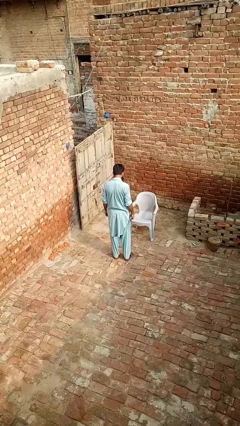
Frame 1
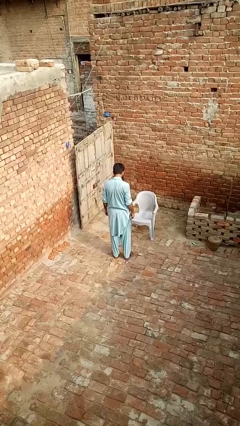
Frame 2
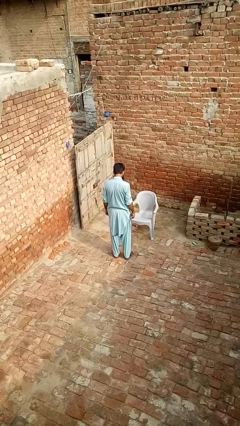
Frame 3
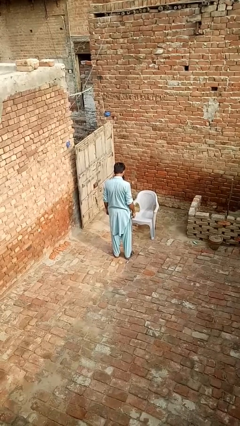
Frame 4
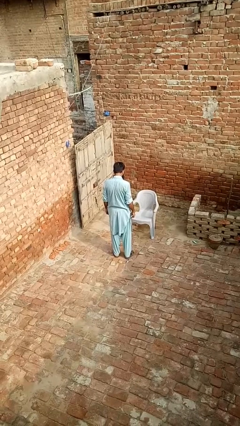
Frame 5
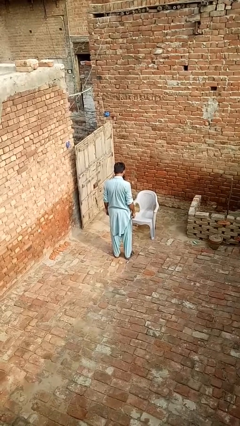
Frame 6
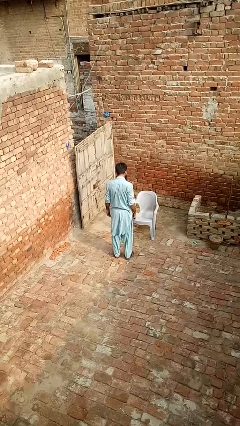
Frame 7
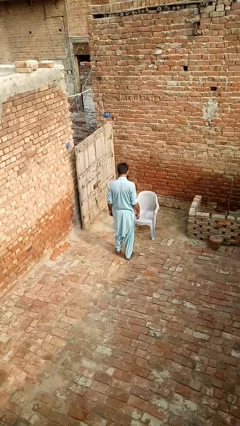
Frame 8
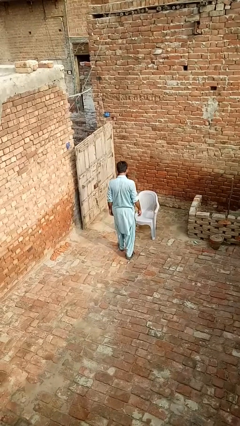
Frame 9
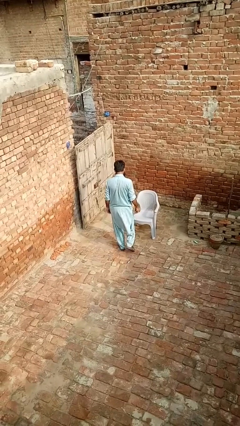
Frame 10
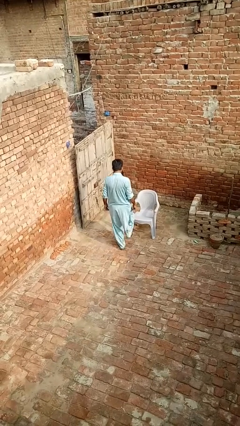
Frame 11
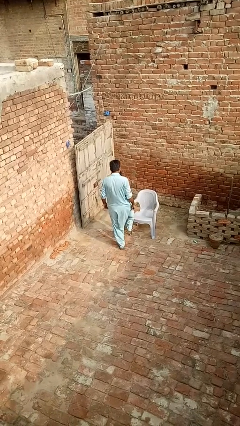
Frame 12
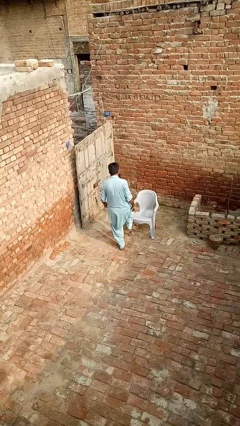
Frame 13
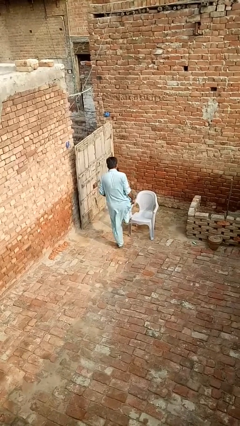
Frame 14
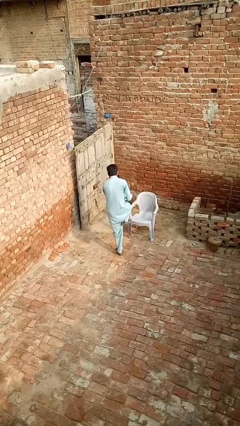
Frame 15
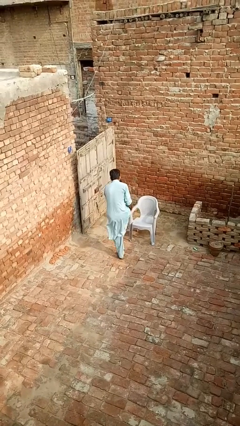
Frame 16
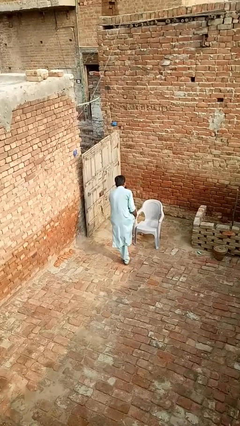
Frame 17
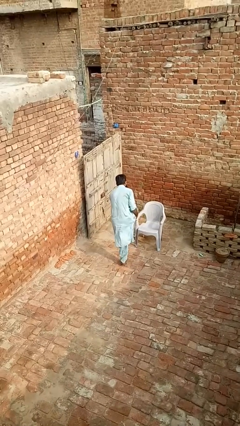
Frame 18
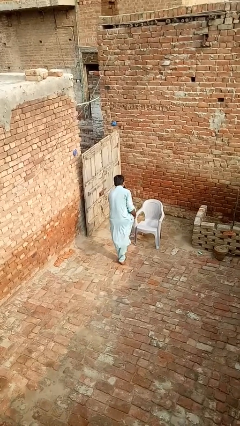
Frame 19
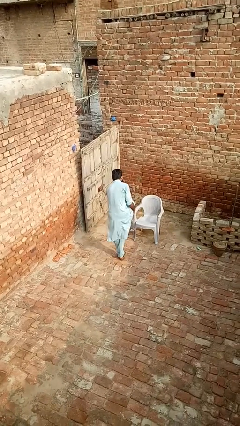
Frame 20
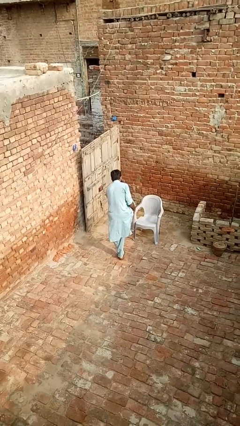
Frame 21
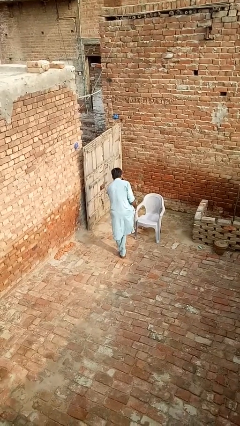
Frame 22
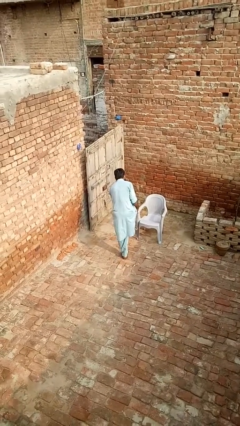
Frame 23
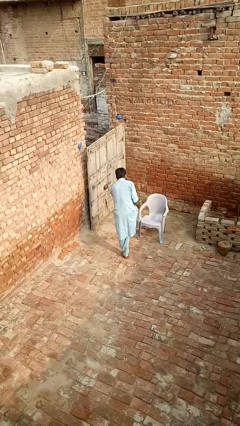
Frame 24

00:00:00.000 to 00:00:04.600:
person stubs toe

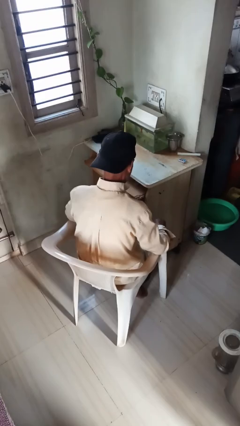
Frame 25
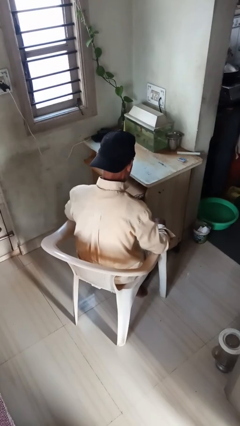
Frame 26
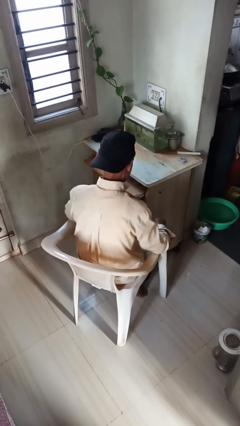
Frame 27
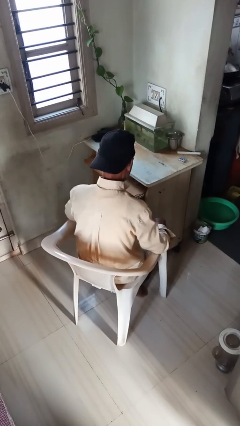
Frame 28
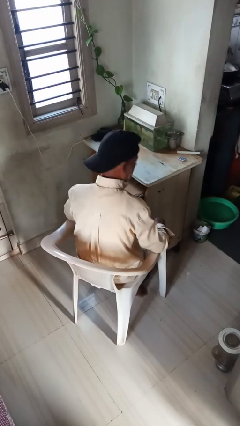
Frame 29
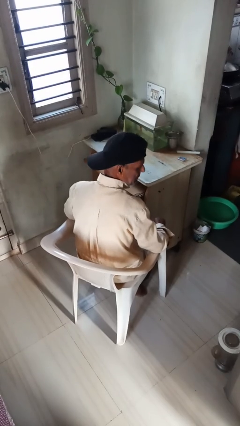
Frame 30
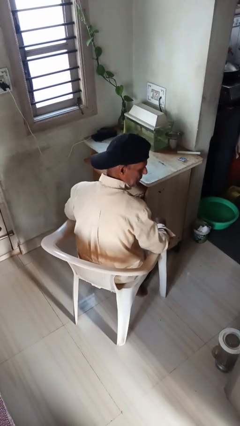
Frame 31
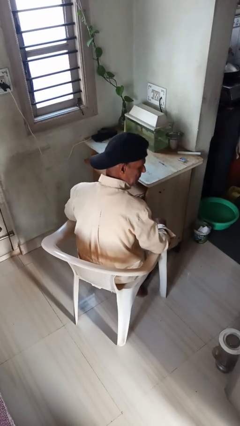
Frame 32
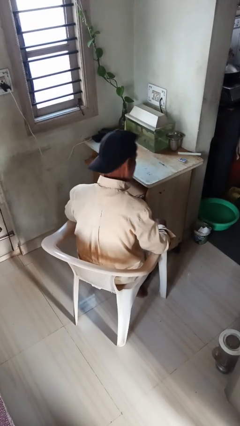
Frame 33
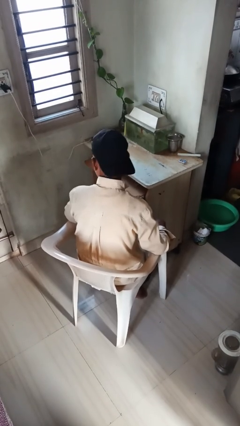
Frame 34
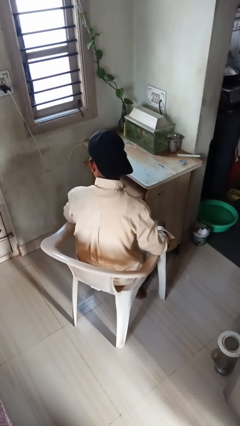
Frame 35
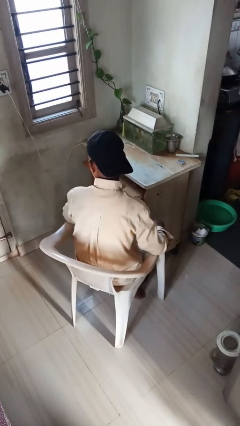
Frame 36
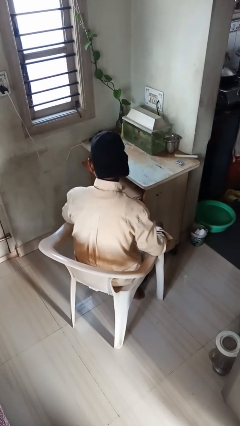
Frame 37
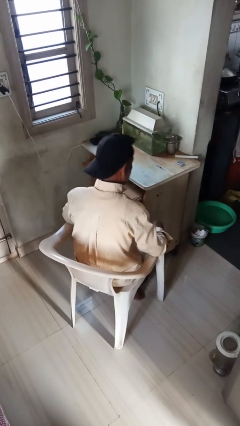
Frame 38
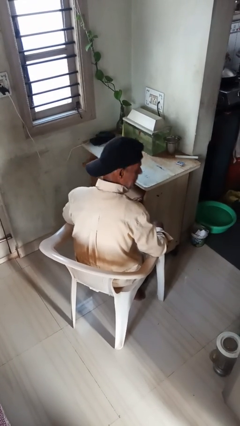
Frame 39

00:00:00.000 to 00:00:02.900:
person shakes head

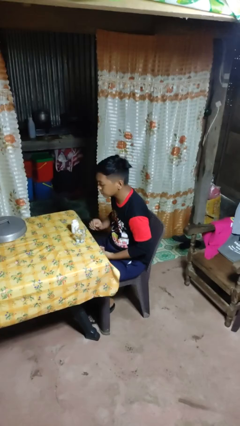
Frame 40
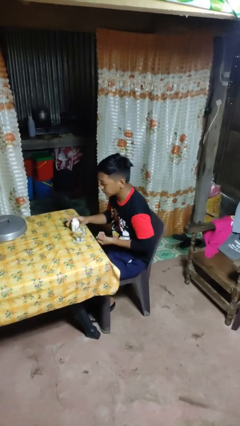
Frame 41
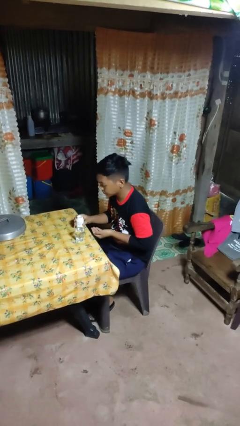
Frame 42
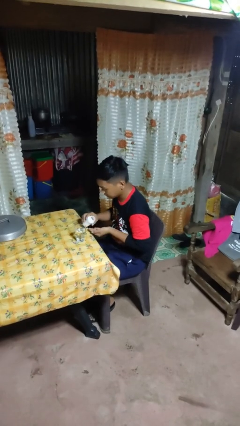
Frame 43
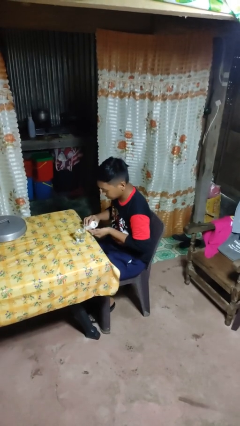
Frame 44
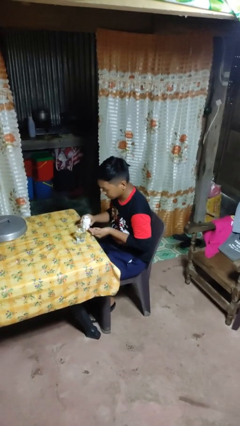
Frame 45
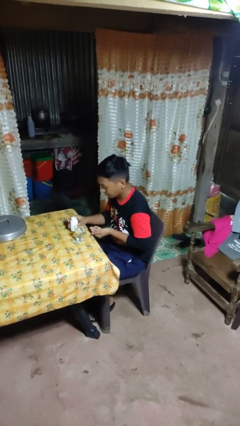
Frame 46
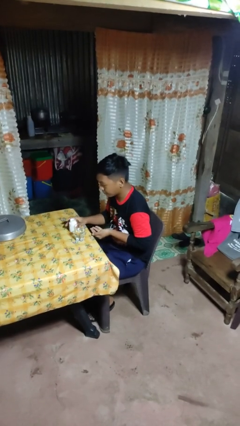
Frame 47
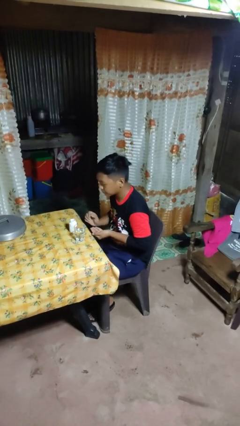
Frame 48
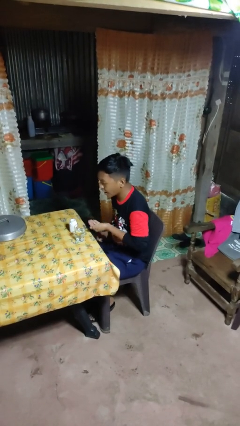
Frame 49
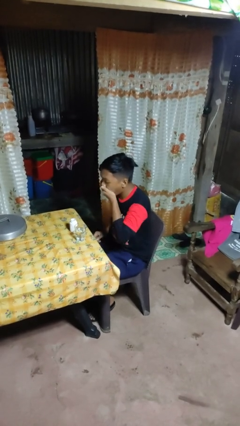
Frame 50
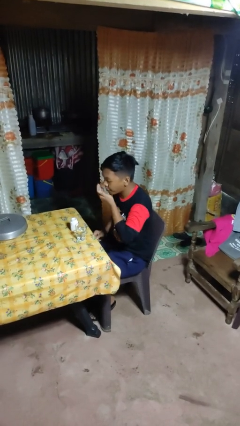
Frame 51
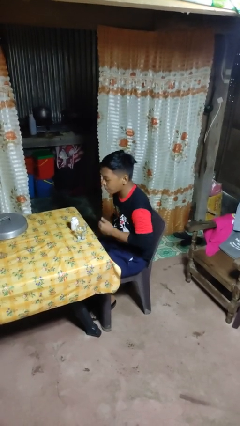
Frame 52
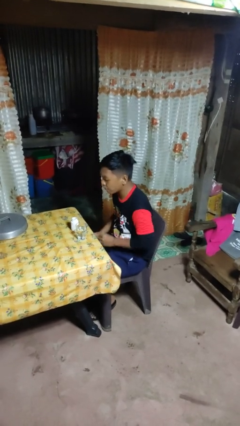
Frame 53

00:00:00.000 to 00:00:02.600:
person takes medicine pills

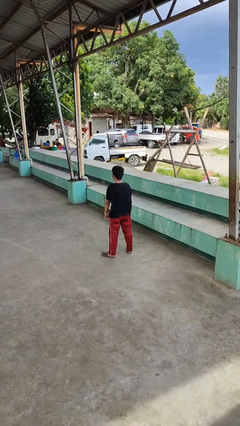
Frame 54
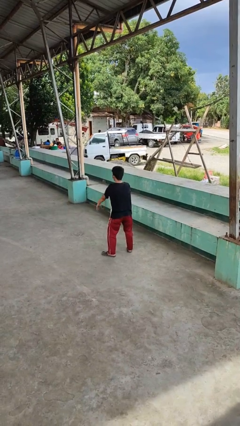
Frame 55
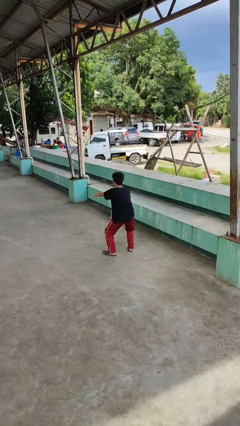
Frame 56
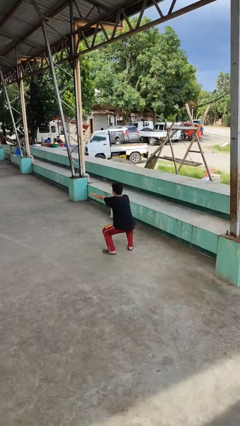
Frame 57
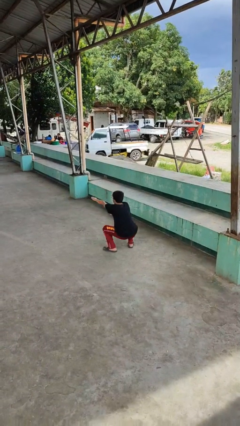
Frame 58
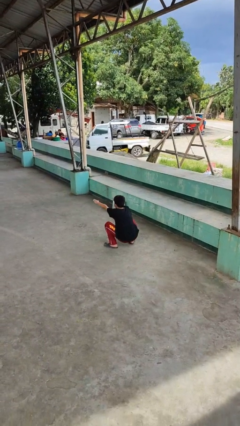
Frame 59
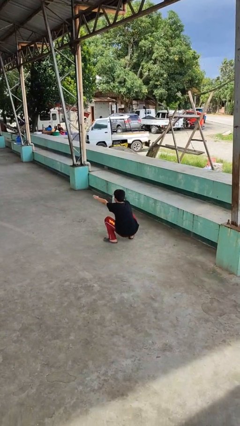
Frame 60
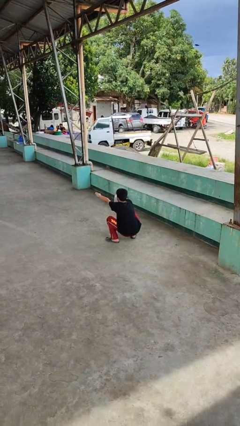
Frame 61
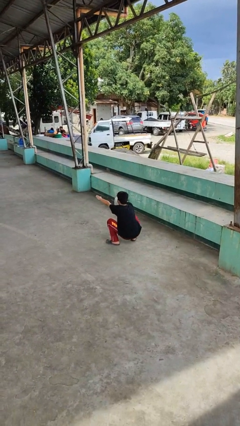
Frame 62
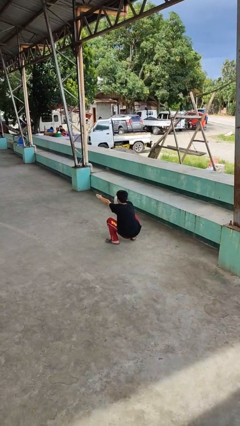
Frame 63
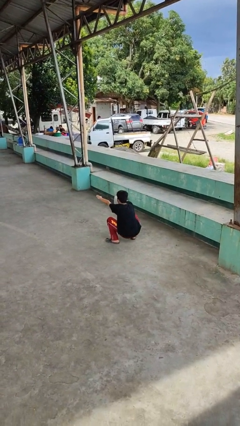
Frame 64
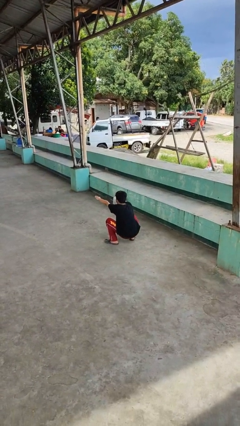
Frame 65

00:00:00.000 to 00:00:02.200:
person squats

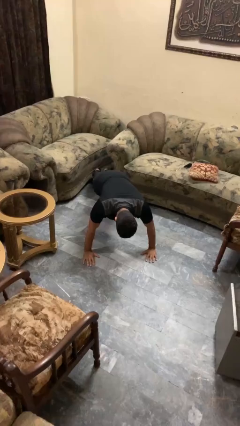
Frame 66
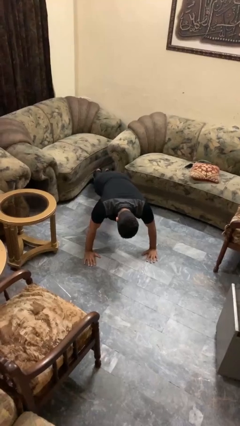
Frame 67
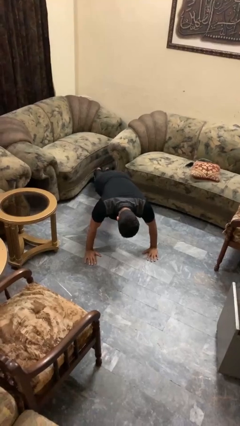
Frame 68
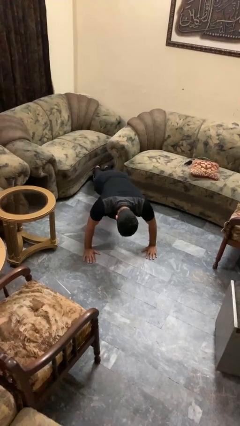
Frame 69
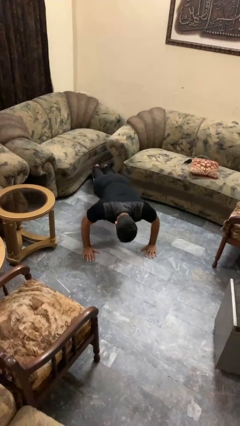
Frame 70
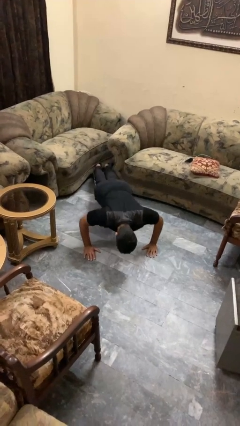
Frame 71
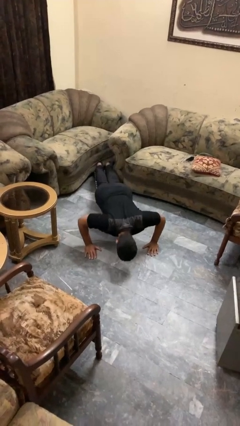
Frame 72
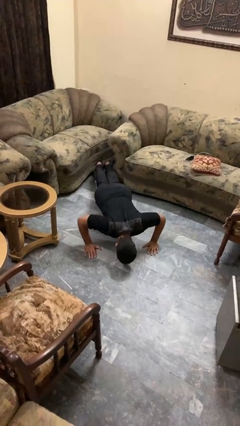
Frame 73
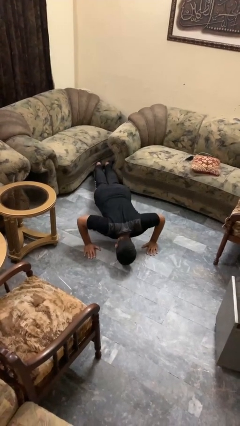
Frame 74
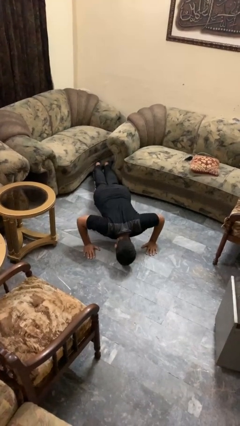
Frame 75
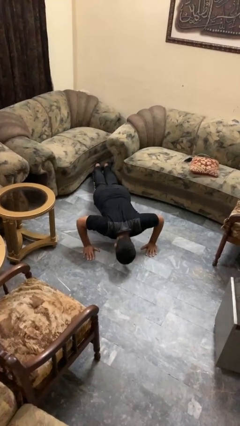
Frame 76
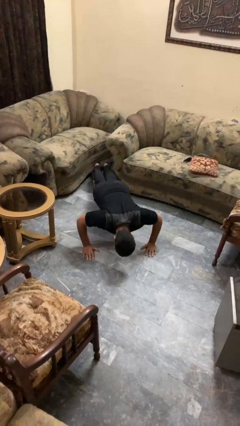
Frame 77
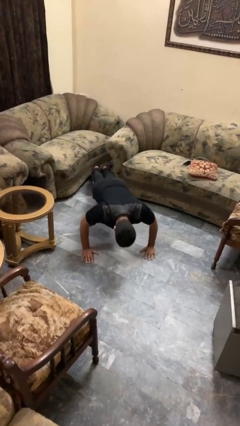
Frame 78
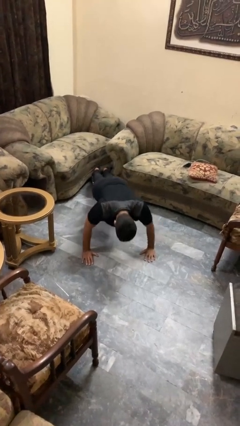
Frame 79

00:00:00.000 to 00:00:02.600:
person exercises with pushup

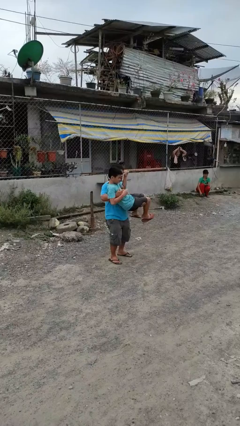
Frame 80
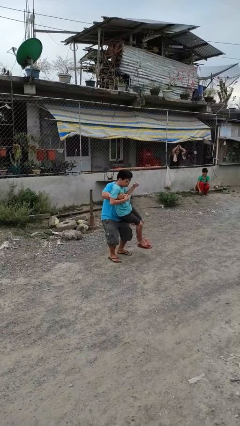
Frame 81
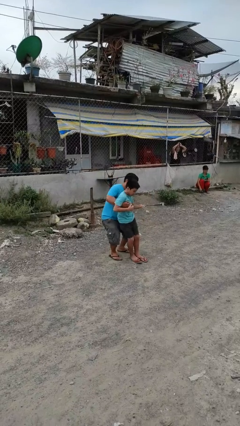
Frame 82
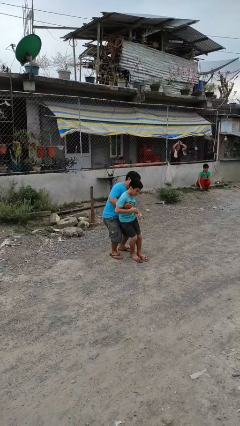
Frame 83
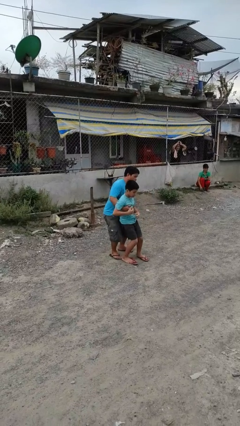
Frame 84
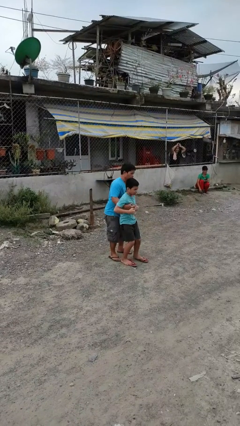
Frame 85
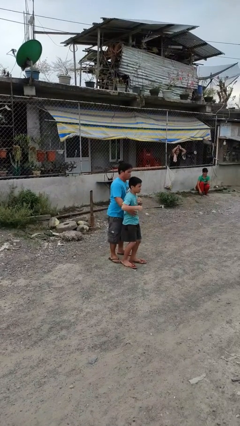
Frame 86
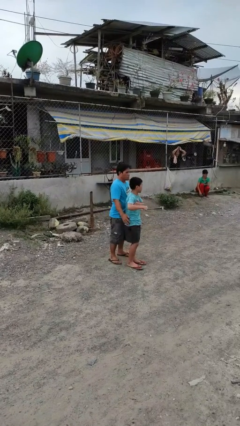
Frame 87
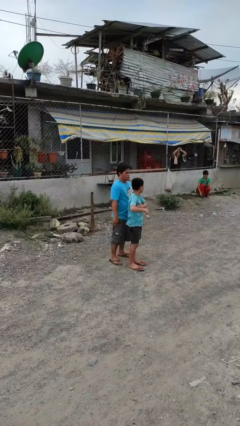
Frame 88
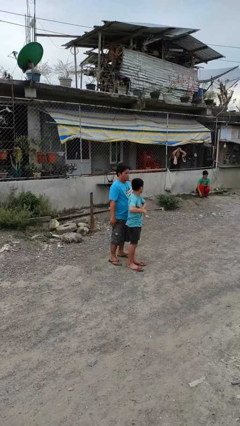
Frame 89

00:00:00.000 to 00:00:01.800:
person puts down person

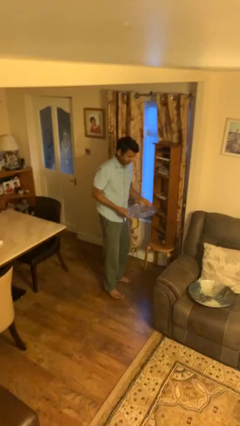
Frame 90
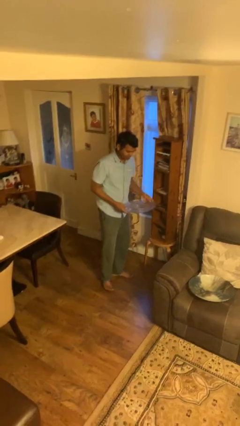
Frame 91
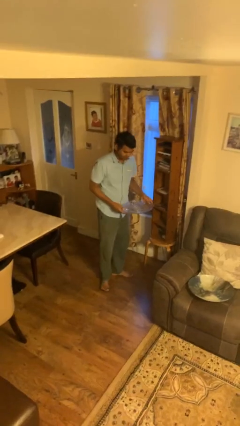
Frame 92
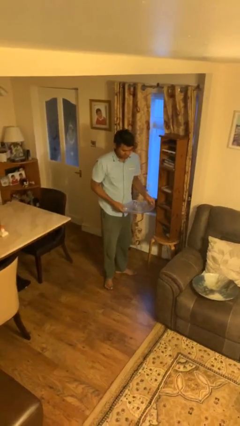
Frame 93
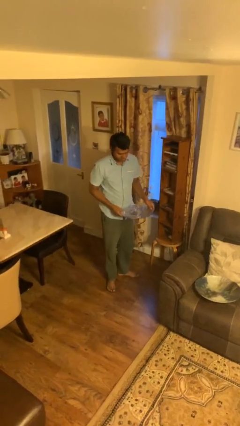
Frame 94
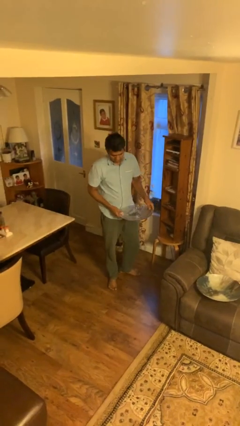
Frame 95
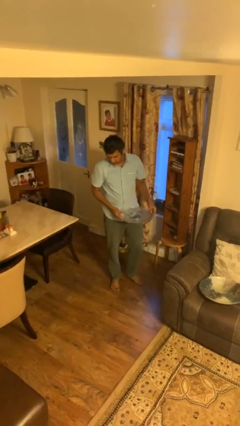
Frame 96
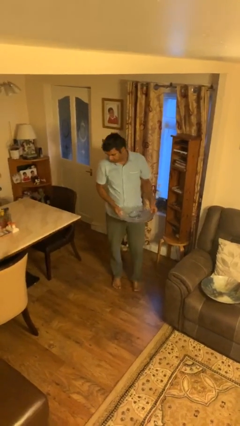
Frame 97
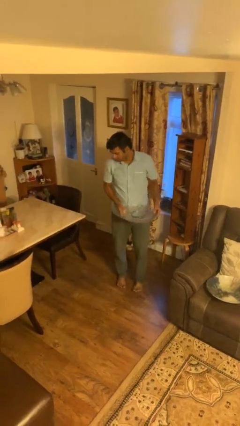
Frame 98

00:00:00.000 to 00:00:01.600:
person puts down object on table
